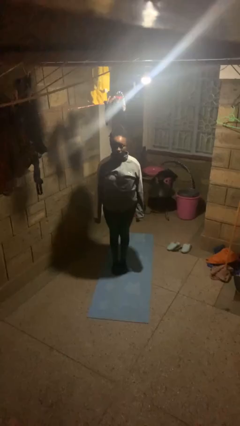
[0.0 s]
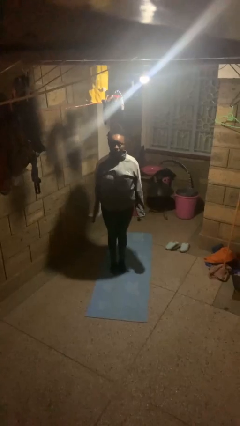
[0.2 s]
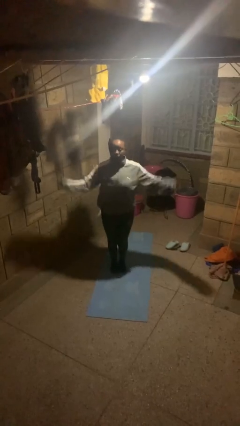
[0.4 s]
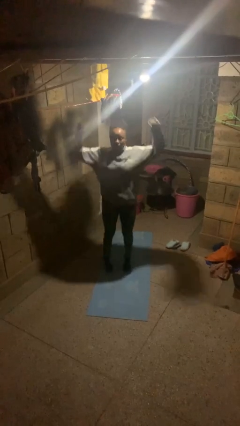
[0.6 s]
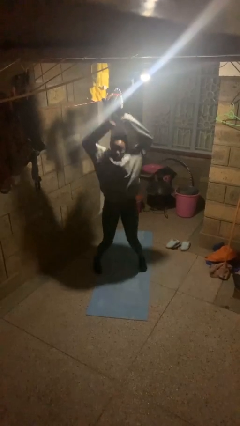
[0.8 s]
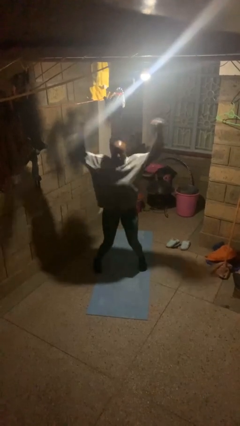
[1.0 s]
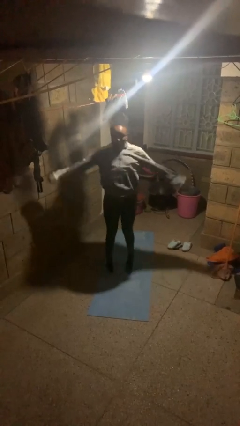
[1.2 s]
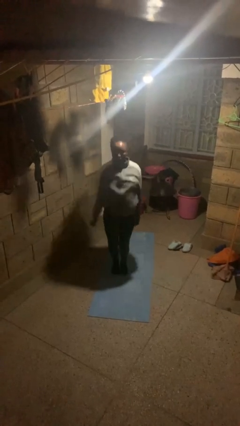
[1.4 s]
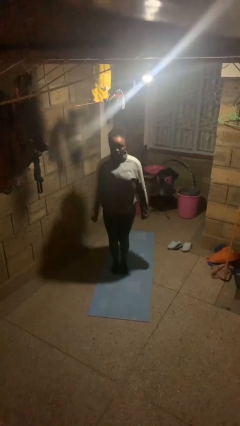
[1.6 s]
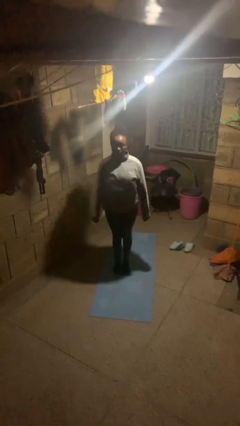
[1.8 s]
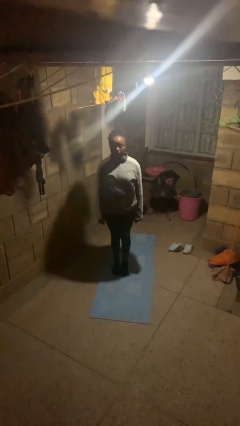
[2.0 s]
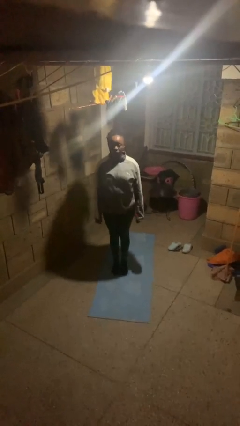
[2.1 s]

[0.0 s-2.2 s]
person exercises with jumping jacks

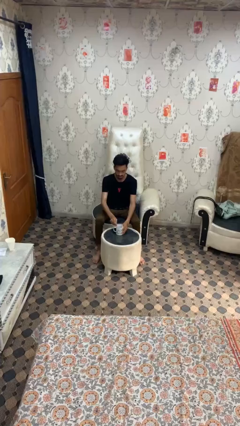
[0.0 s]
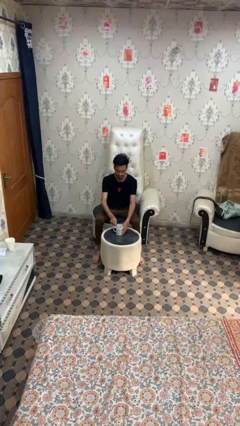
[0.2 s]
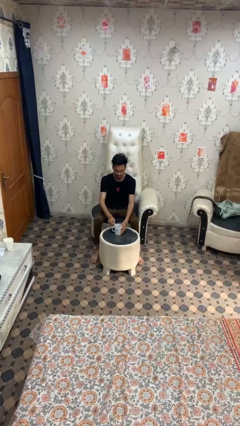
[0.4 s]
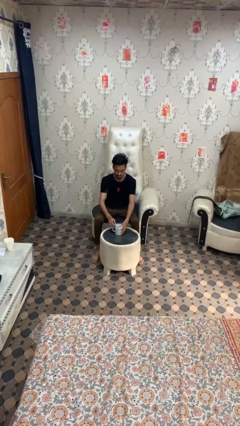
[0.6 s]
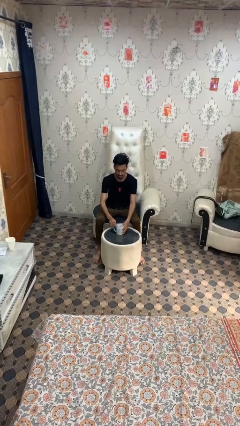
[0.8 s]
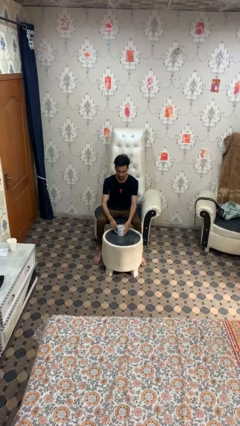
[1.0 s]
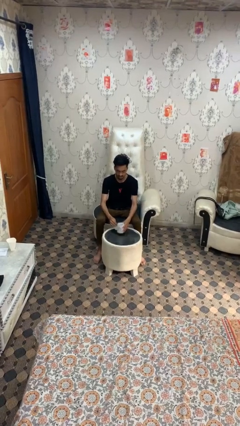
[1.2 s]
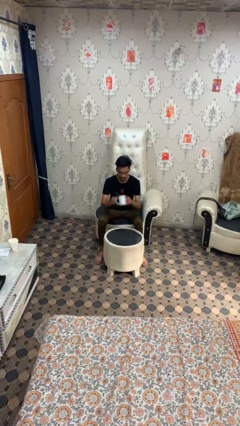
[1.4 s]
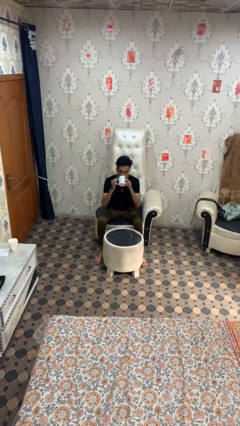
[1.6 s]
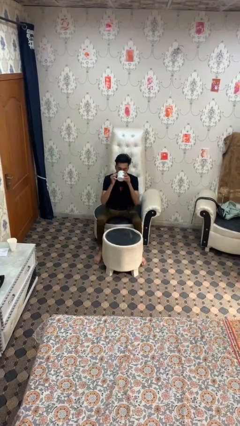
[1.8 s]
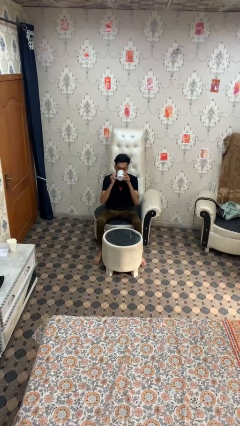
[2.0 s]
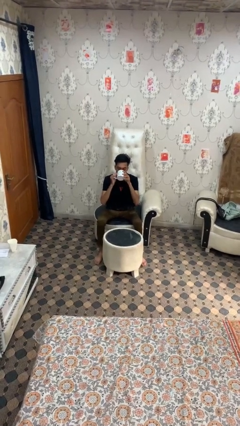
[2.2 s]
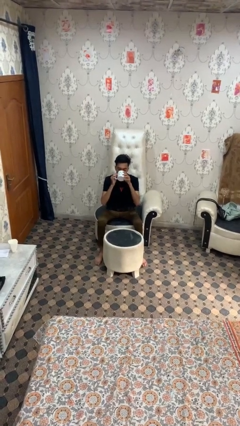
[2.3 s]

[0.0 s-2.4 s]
person drinks from mug

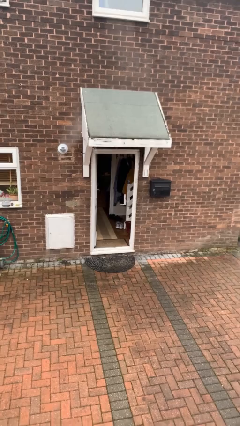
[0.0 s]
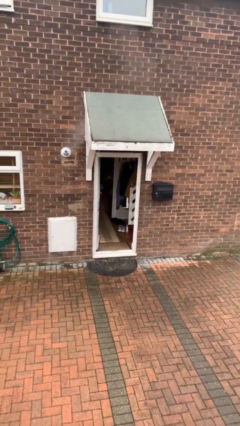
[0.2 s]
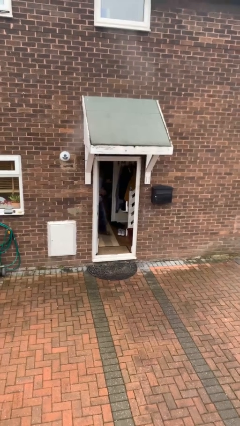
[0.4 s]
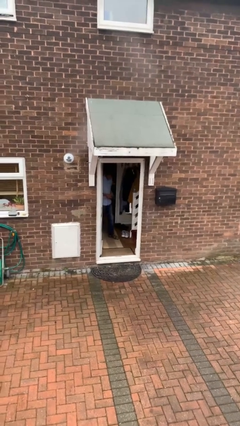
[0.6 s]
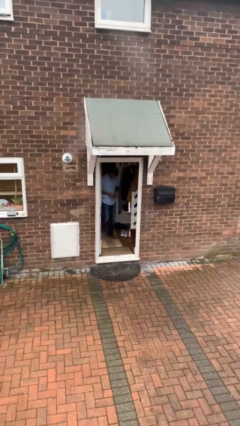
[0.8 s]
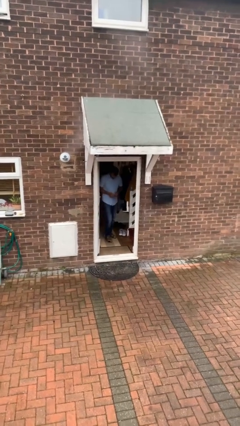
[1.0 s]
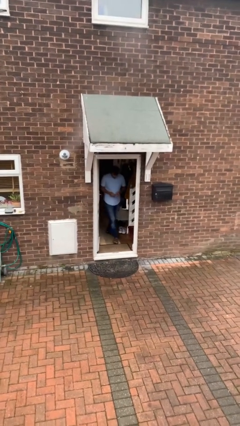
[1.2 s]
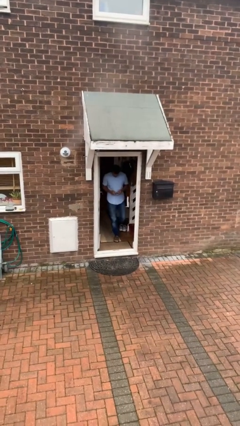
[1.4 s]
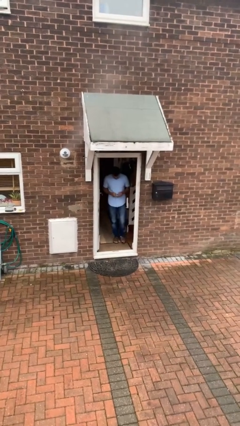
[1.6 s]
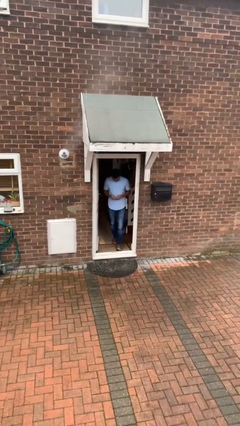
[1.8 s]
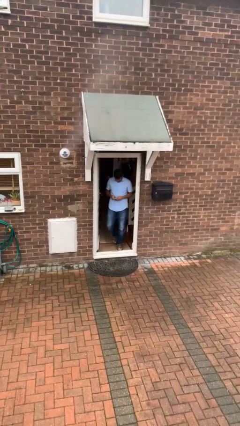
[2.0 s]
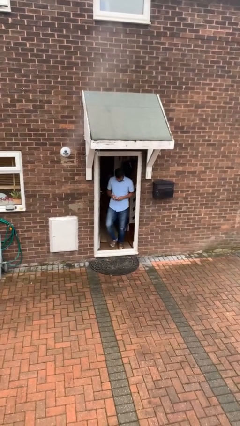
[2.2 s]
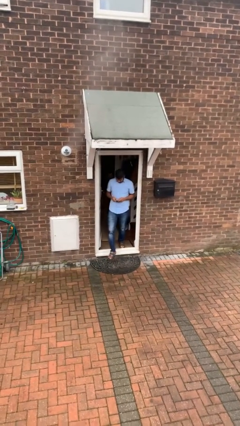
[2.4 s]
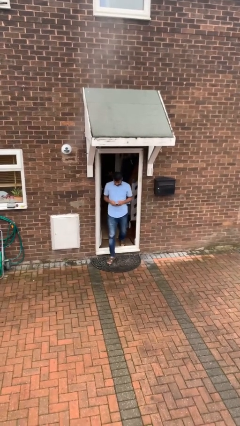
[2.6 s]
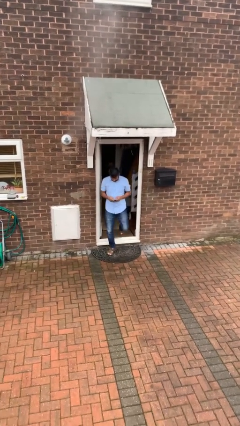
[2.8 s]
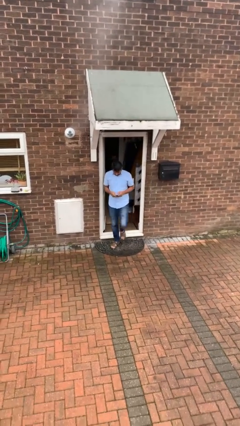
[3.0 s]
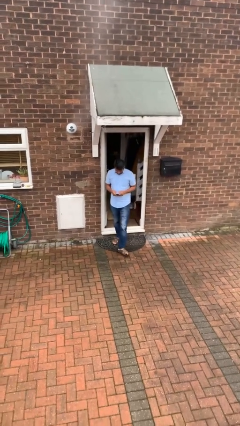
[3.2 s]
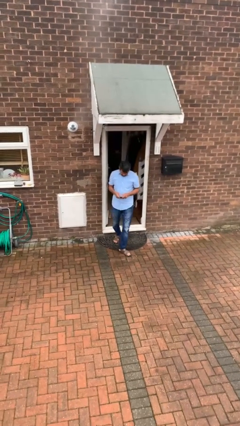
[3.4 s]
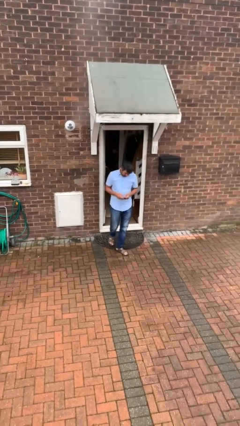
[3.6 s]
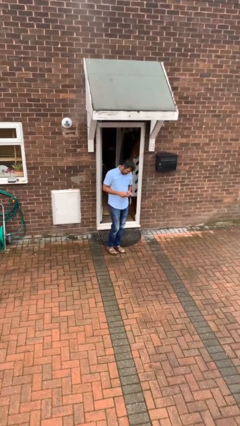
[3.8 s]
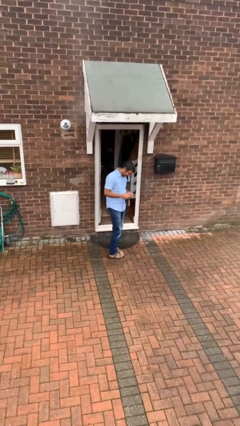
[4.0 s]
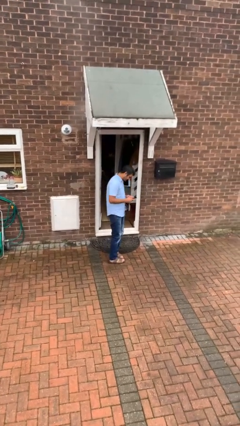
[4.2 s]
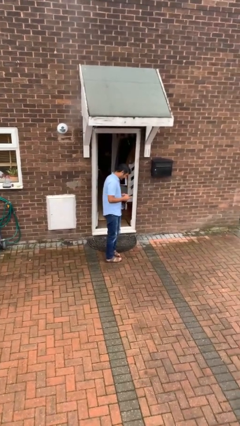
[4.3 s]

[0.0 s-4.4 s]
person enters scene through structure

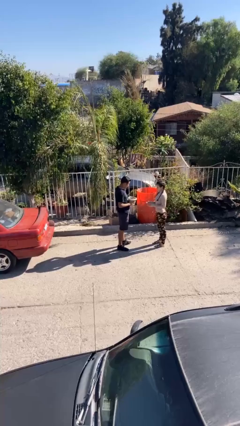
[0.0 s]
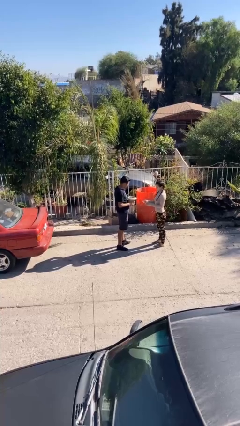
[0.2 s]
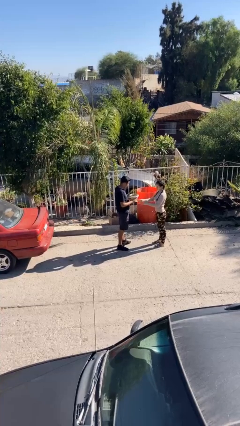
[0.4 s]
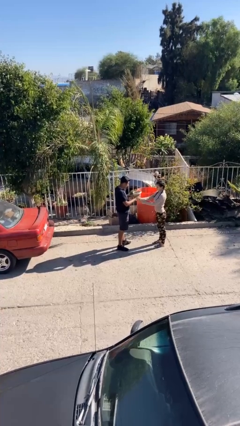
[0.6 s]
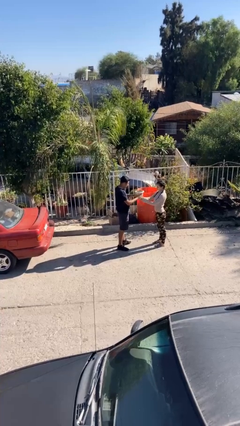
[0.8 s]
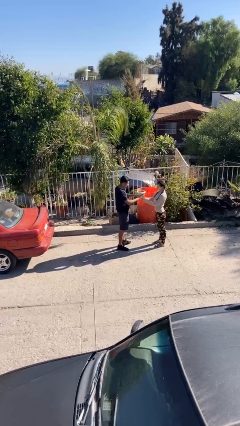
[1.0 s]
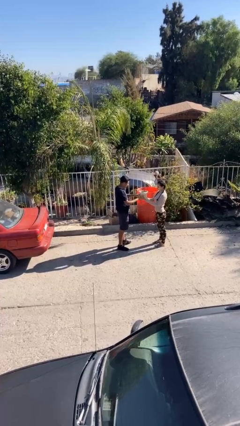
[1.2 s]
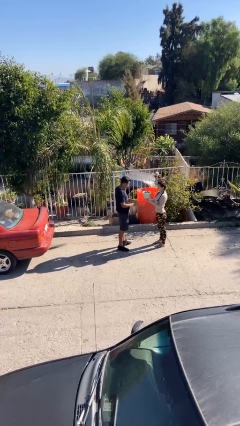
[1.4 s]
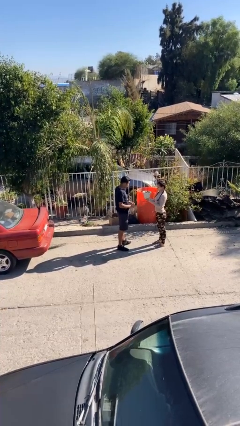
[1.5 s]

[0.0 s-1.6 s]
person transfers object to person

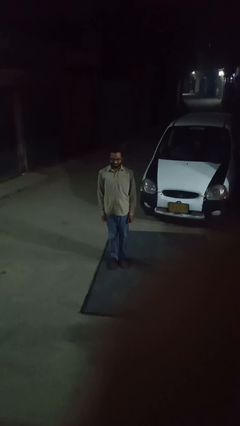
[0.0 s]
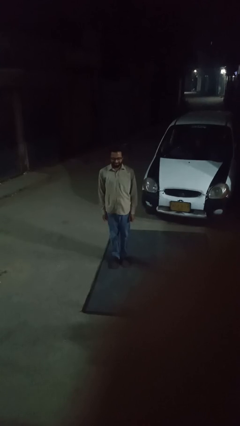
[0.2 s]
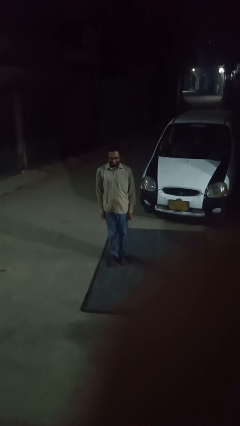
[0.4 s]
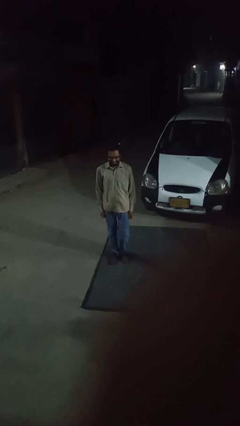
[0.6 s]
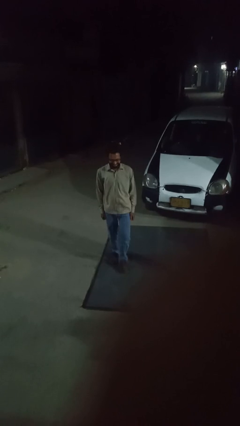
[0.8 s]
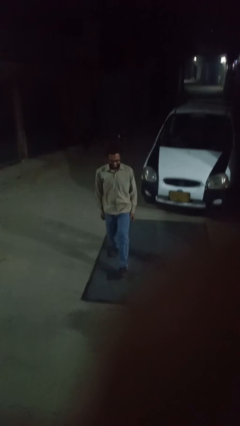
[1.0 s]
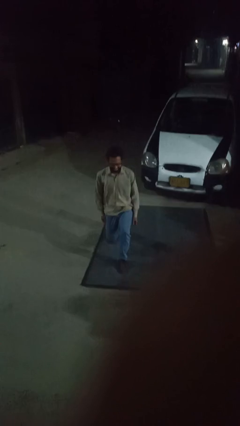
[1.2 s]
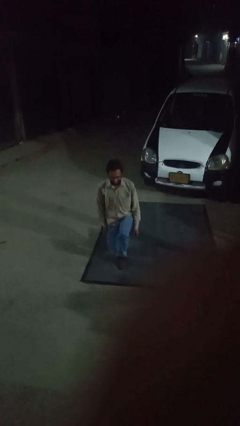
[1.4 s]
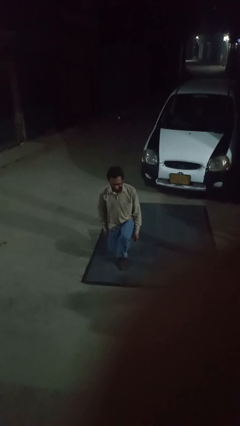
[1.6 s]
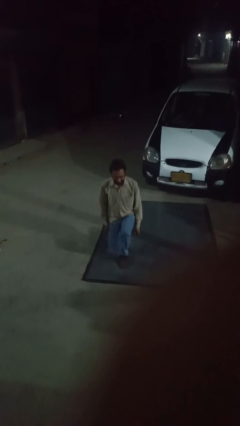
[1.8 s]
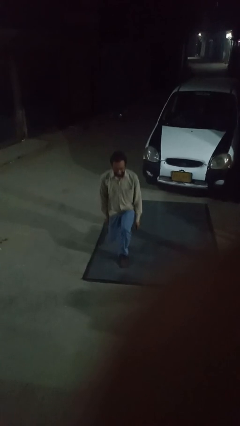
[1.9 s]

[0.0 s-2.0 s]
person exercises with lunges

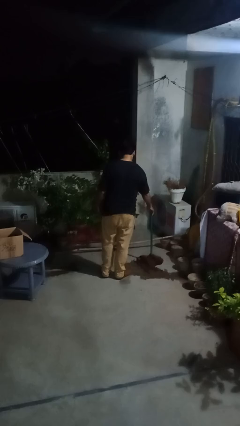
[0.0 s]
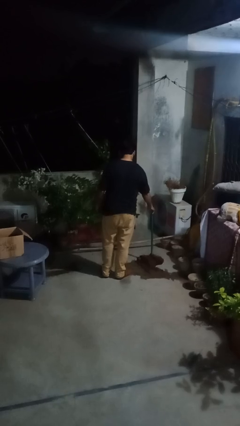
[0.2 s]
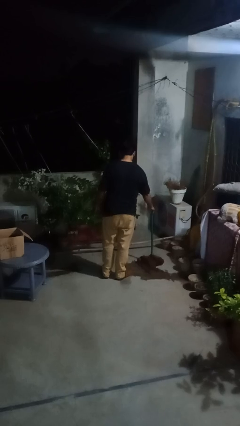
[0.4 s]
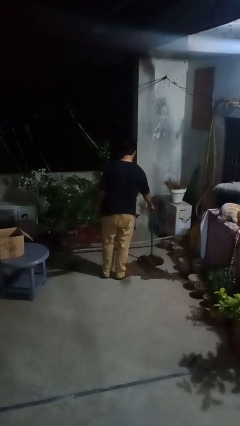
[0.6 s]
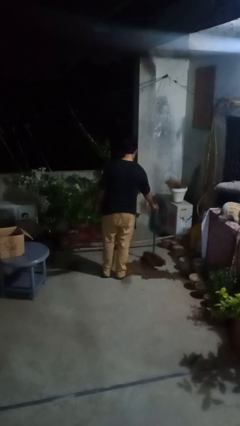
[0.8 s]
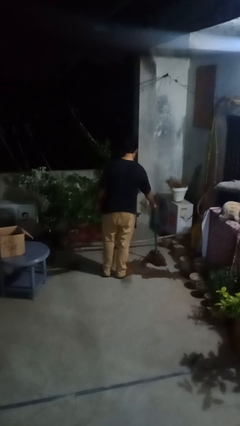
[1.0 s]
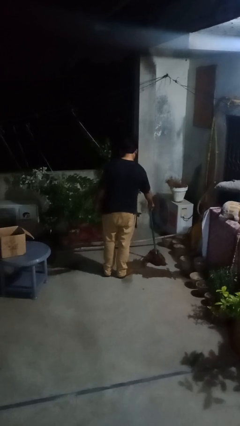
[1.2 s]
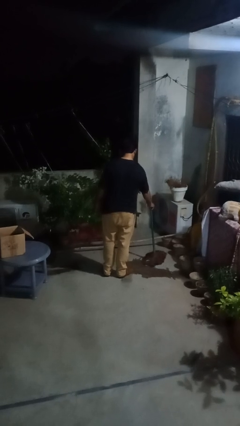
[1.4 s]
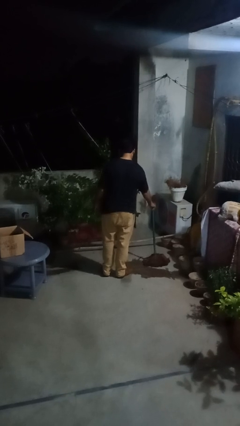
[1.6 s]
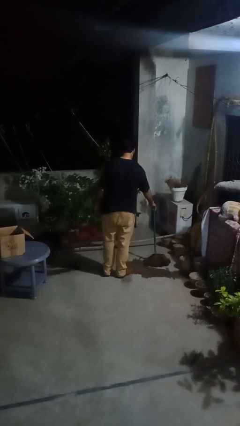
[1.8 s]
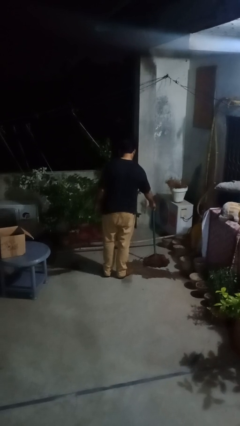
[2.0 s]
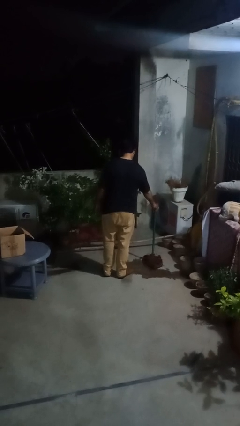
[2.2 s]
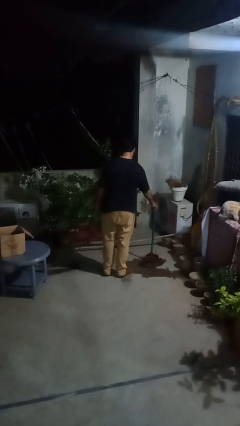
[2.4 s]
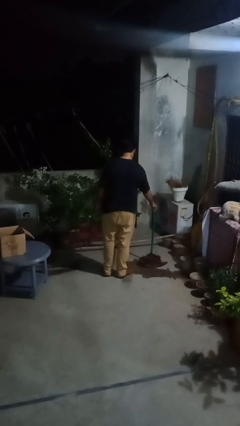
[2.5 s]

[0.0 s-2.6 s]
person mops

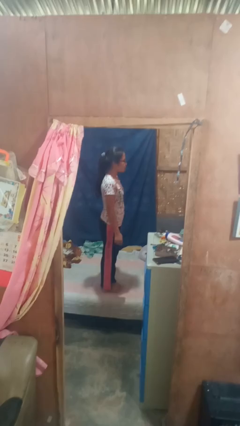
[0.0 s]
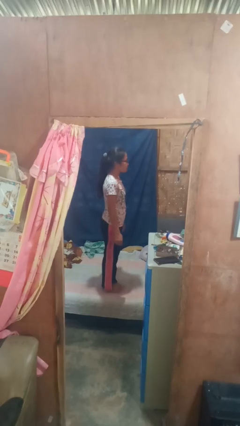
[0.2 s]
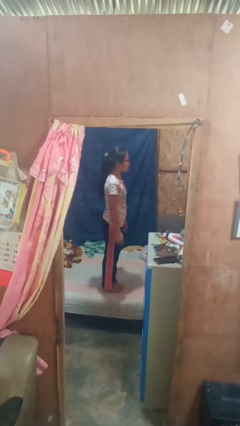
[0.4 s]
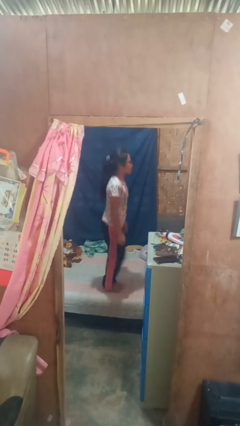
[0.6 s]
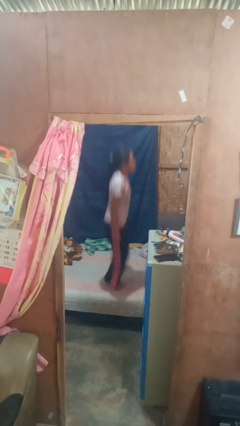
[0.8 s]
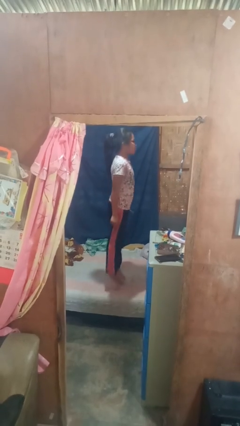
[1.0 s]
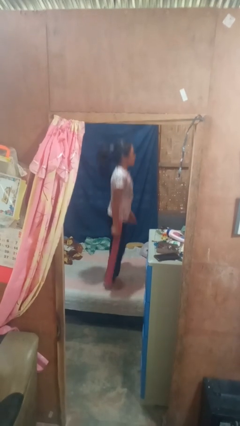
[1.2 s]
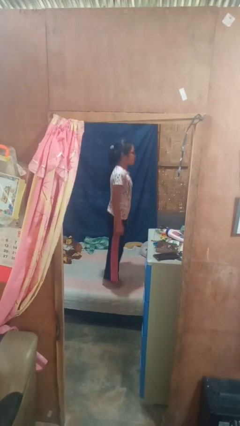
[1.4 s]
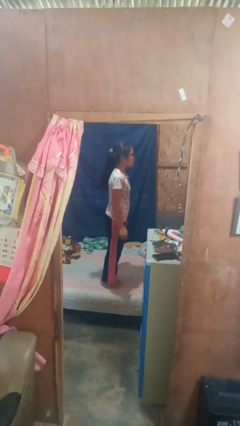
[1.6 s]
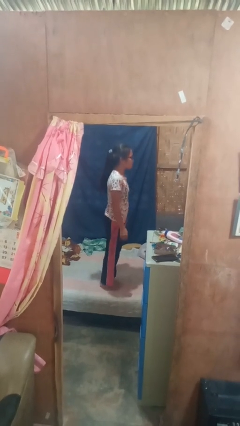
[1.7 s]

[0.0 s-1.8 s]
person jumps on bed

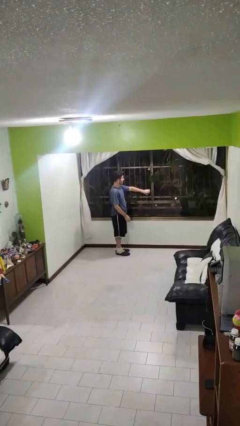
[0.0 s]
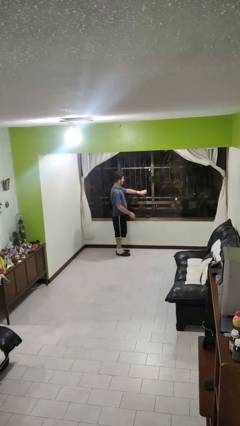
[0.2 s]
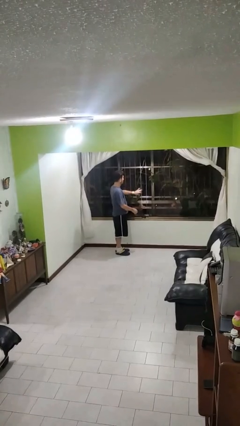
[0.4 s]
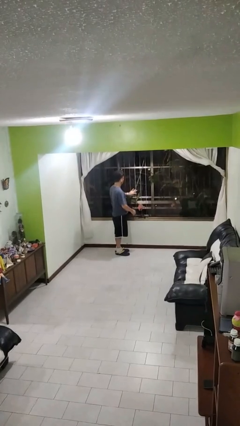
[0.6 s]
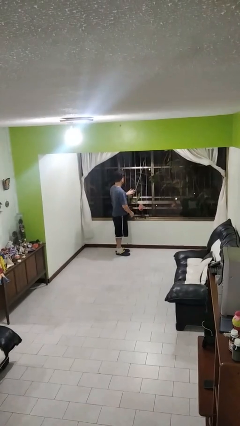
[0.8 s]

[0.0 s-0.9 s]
person opens home window
